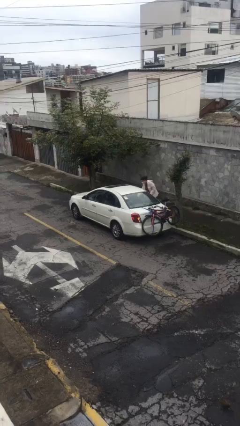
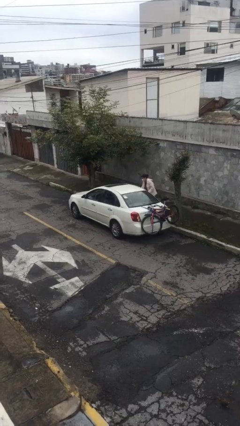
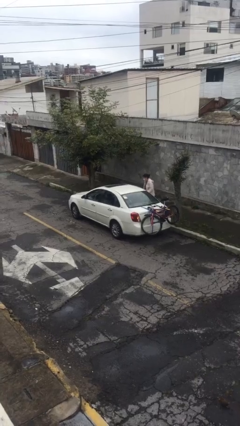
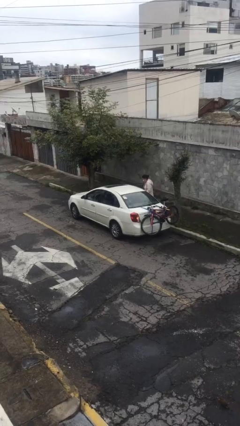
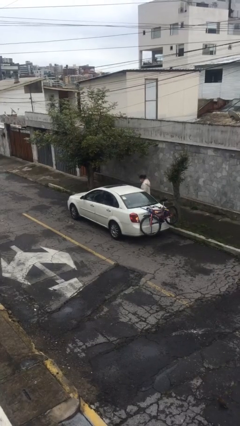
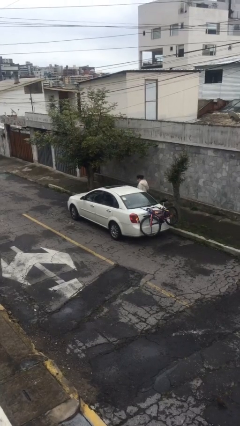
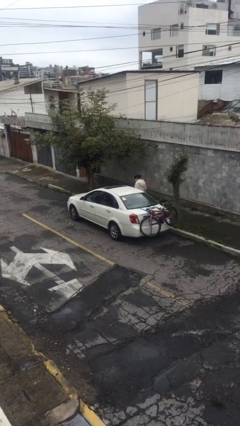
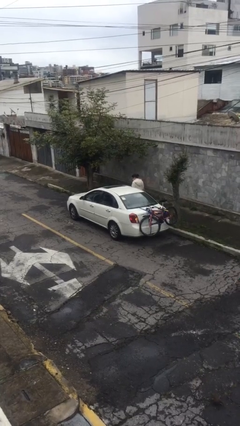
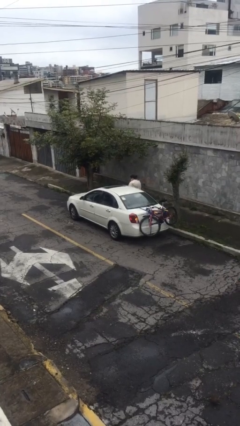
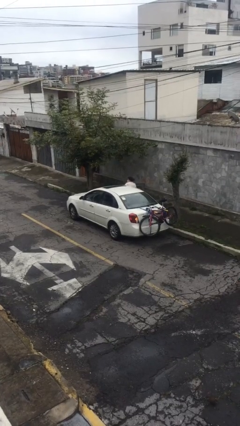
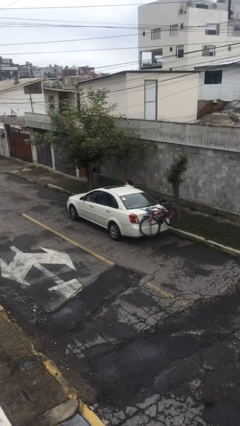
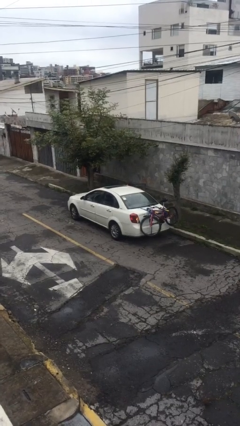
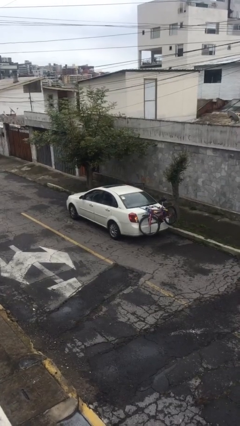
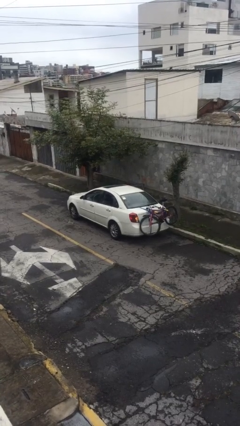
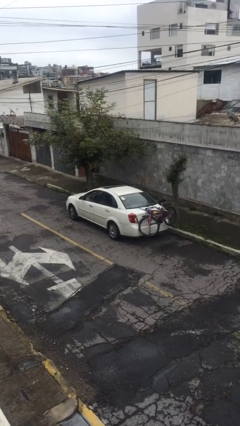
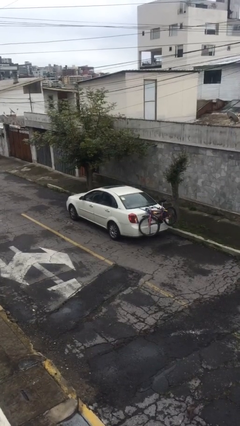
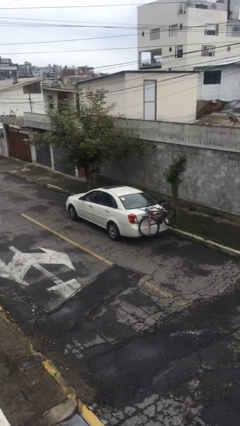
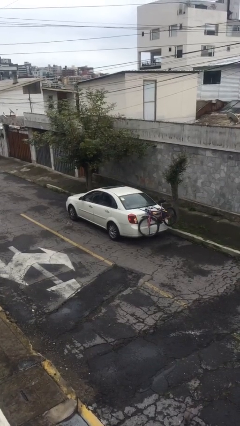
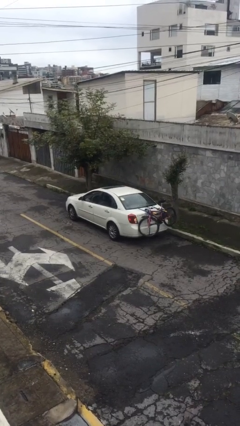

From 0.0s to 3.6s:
car picks up person

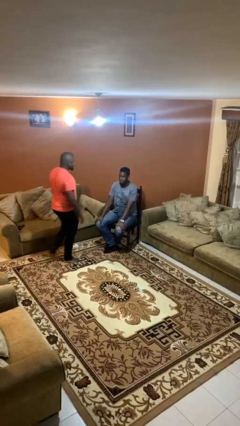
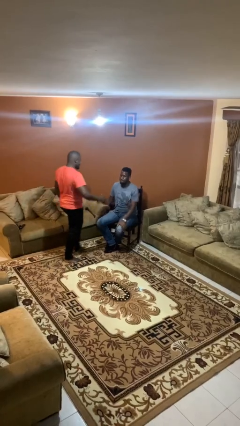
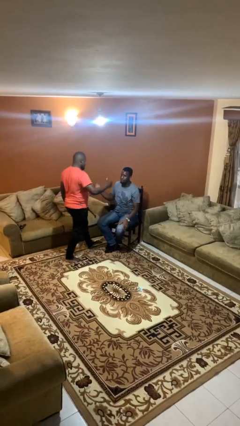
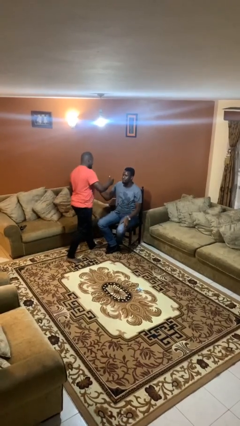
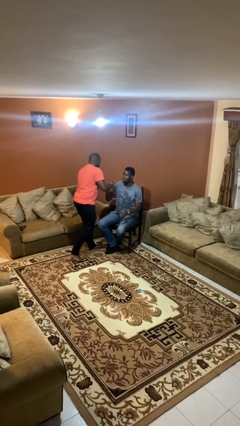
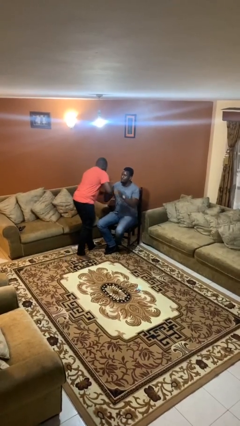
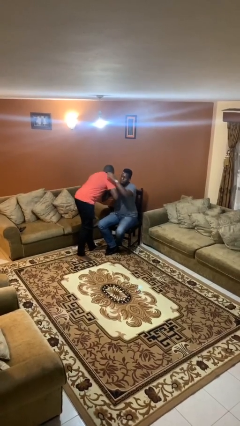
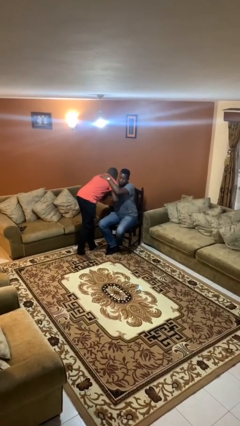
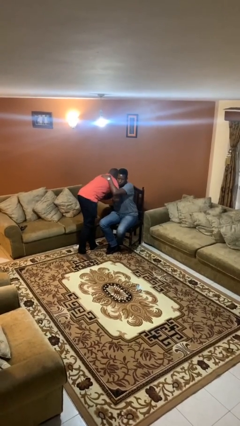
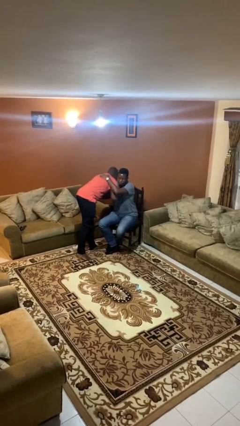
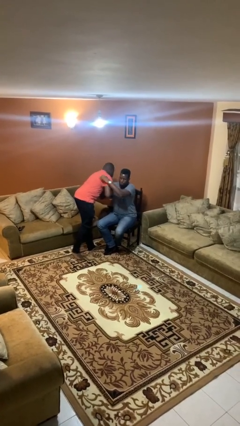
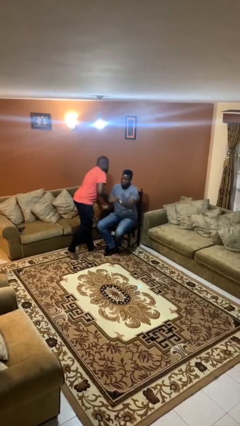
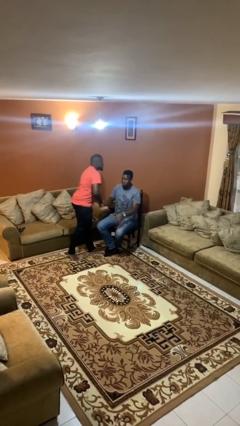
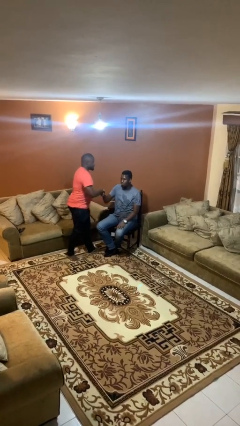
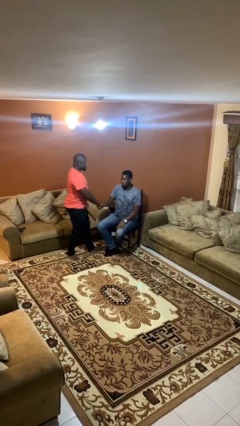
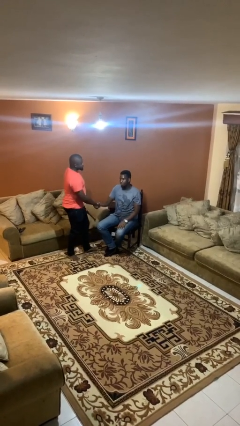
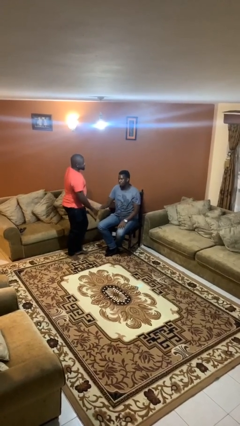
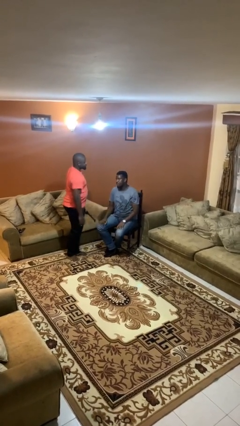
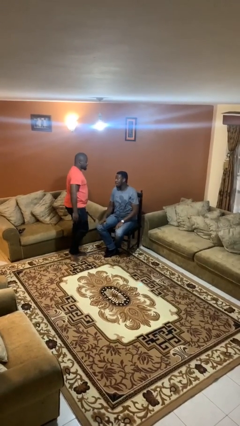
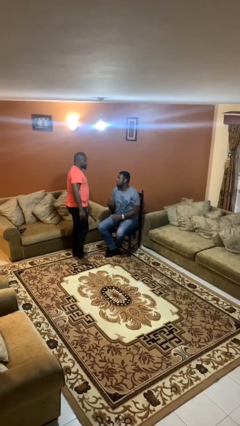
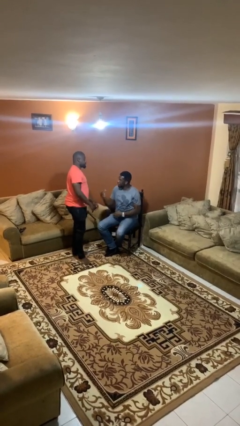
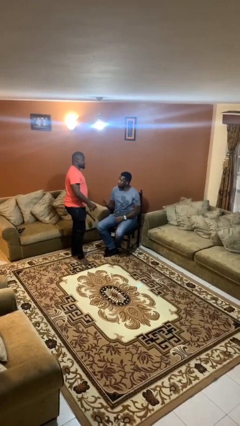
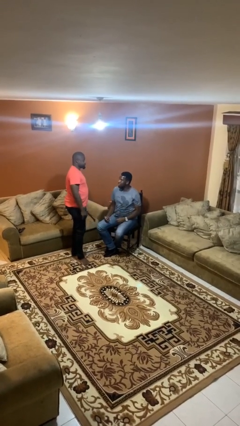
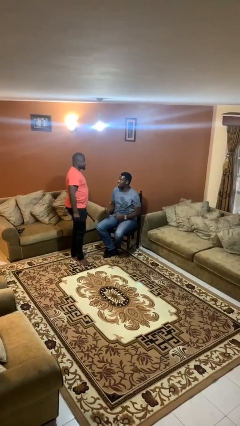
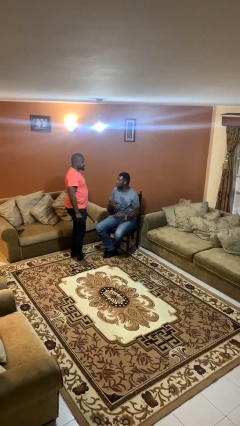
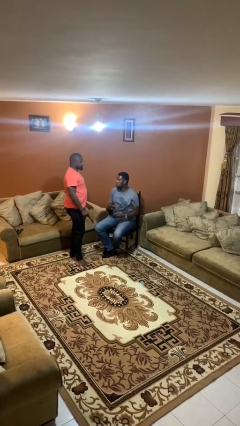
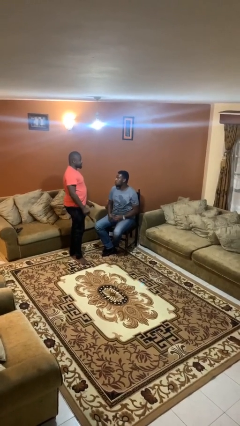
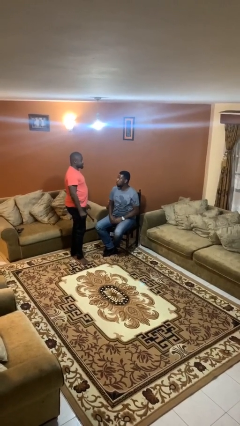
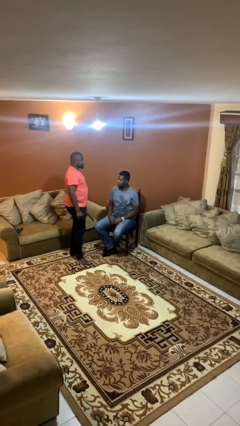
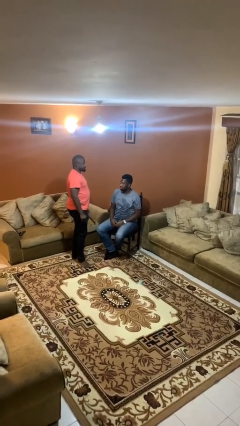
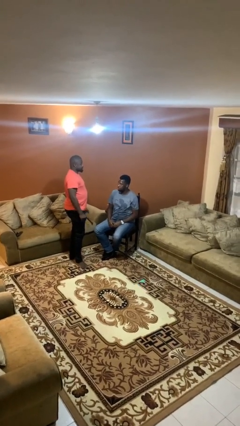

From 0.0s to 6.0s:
person embraces person

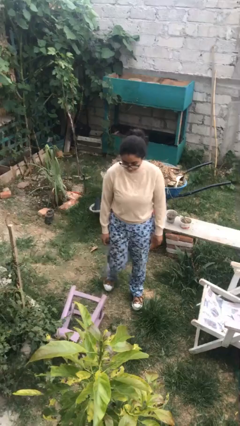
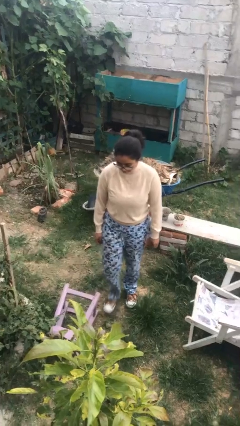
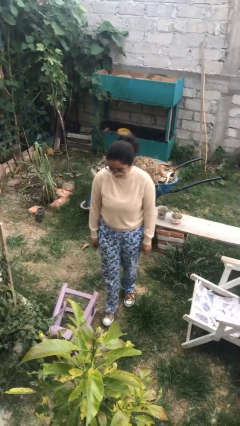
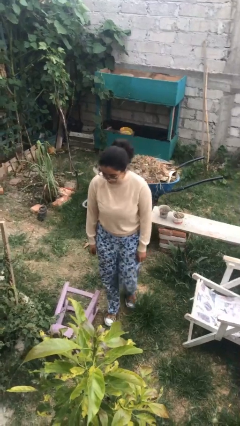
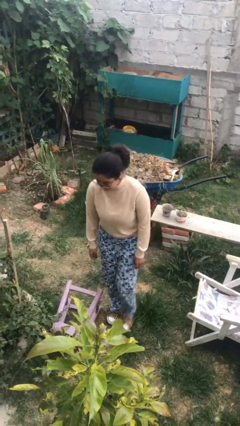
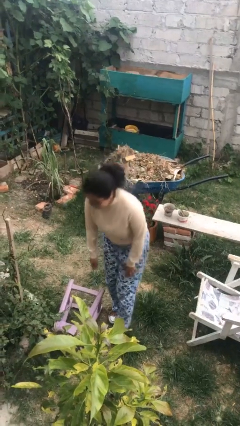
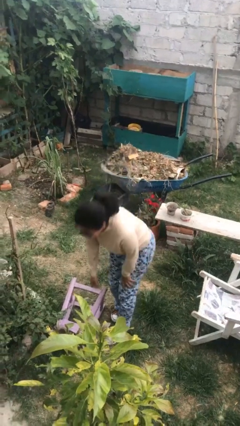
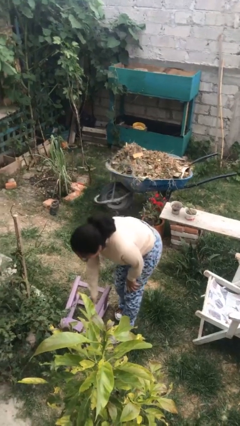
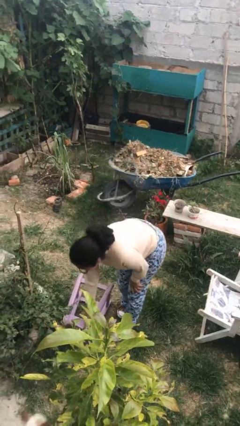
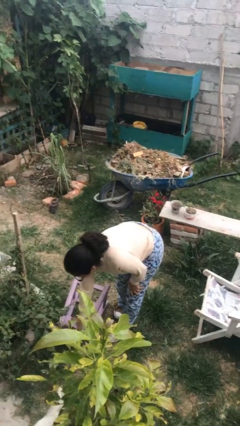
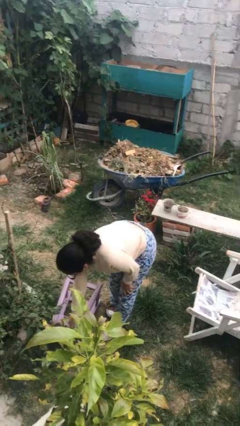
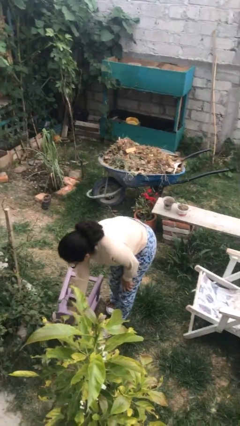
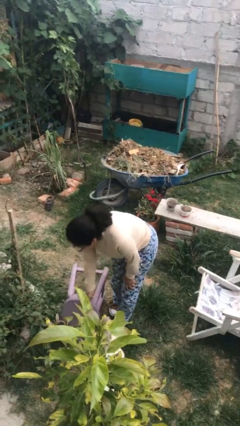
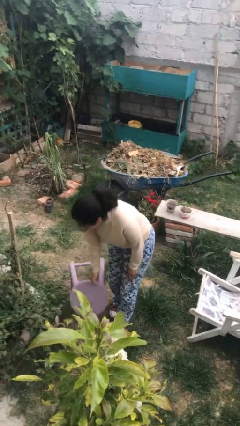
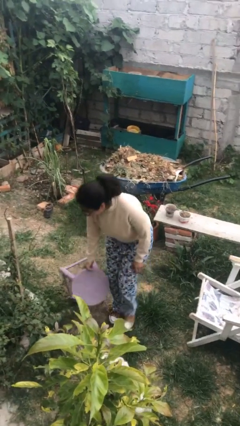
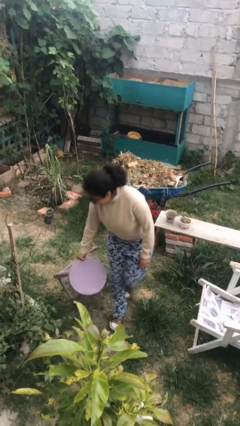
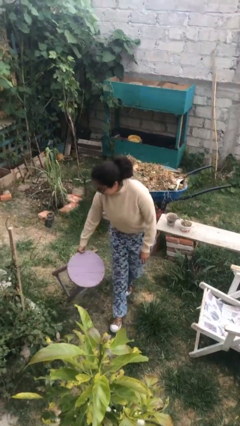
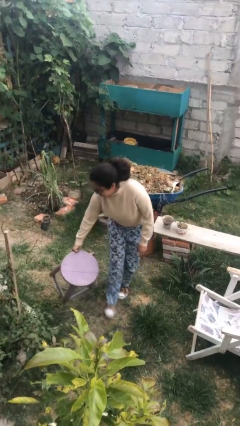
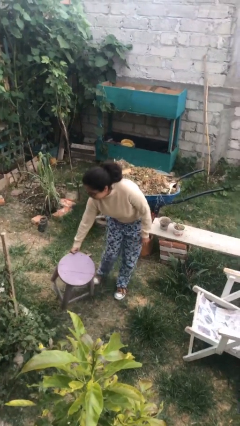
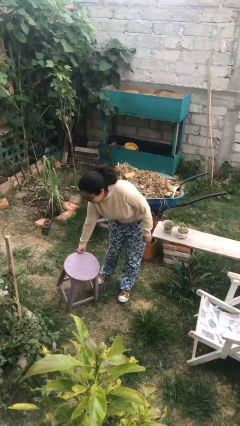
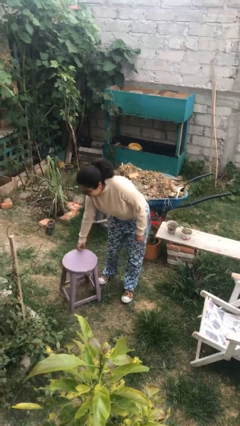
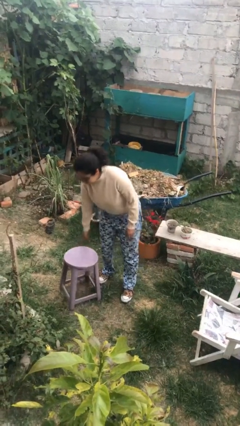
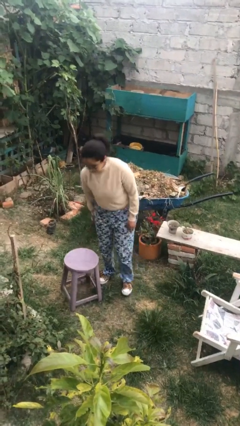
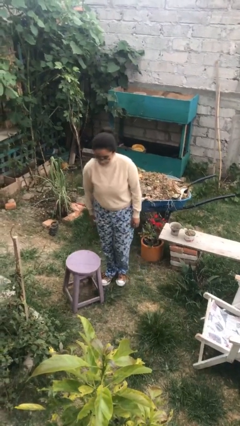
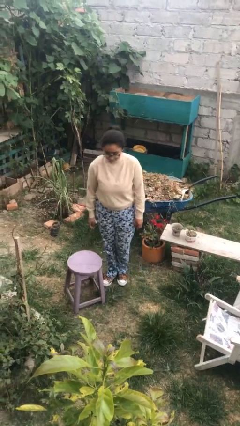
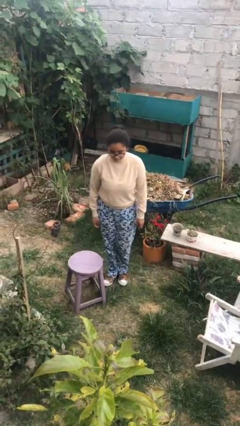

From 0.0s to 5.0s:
person sets upright furniture

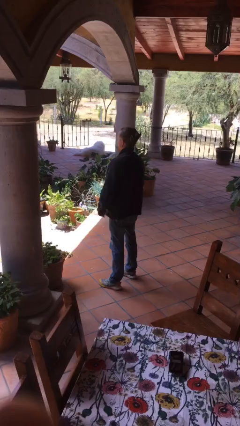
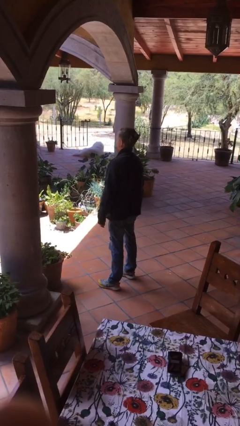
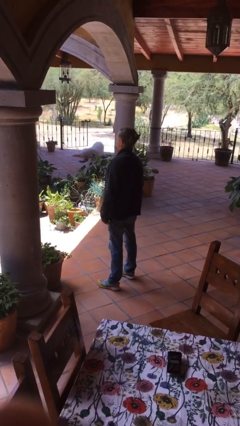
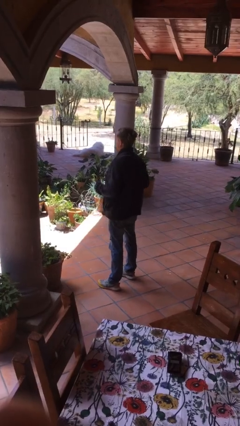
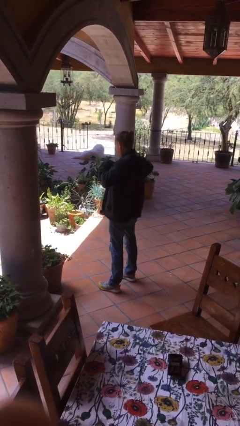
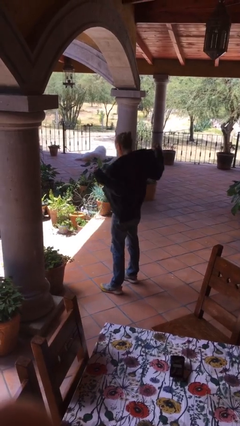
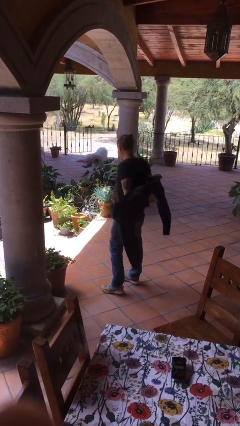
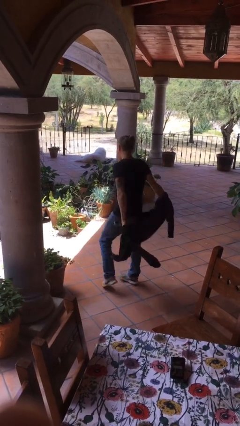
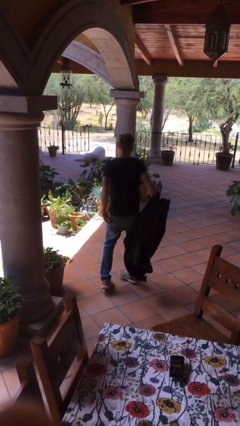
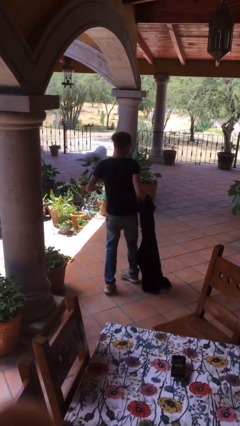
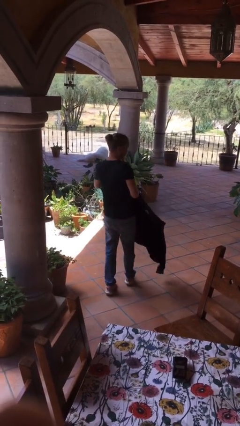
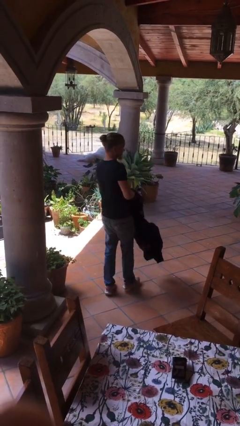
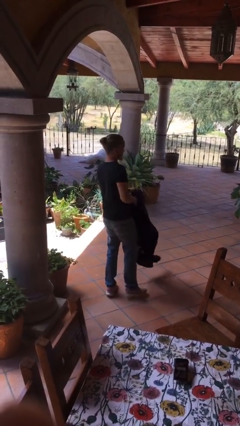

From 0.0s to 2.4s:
person takes off jacket

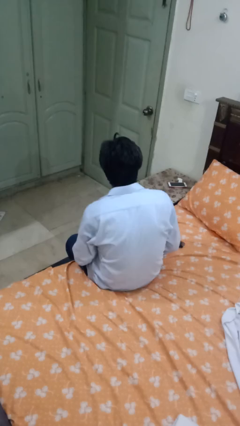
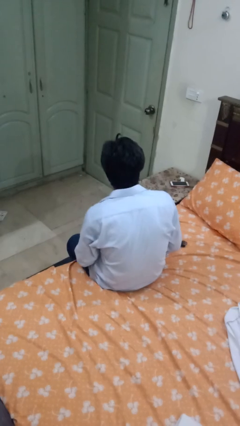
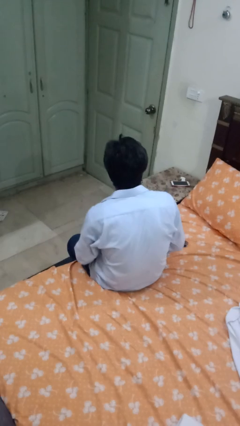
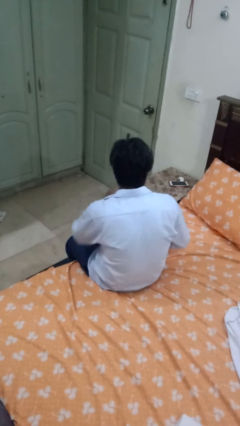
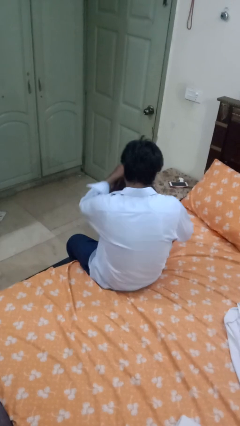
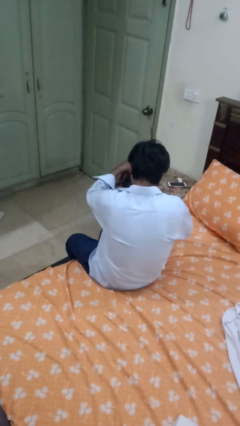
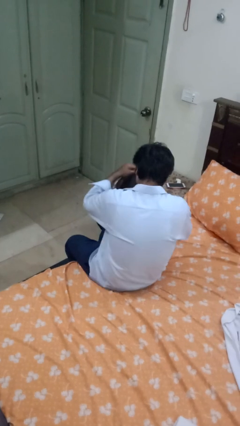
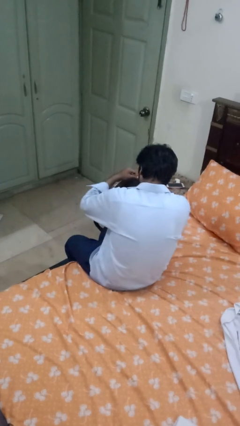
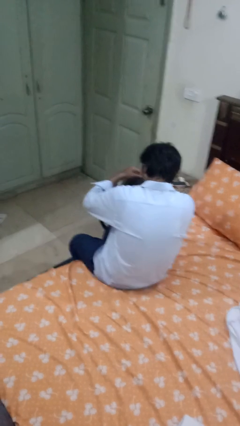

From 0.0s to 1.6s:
person searches in bag
